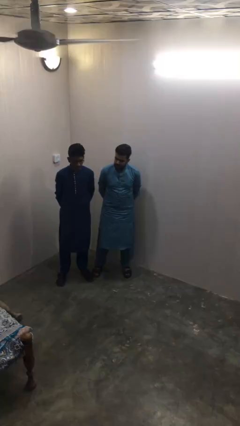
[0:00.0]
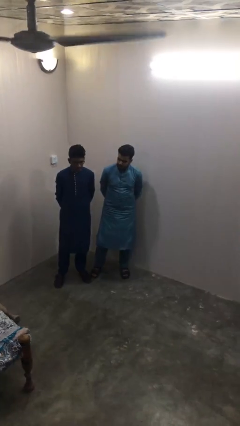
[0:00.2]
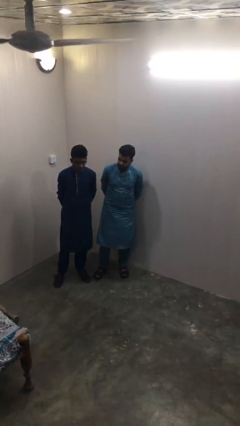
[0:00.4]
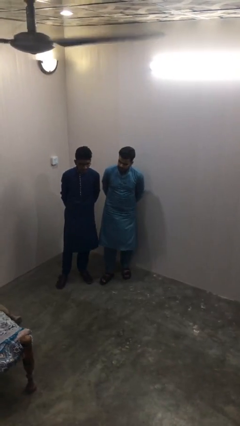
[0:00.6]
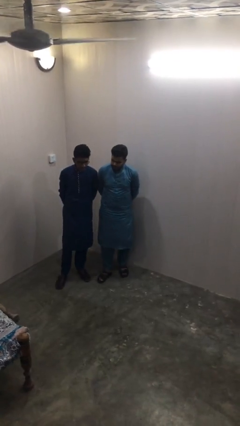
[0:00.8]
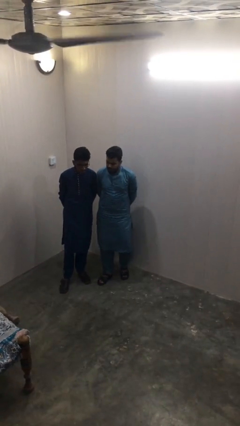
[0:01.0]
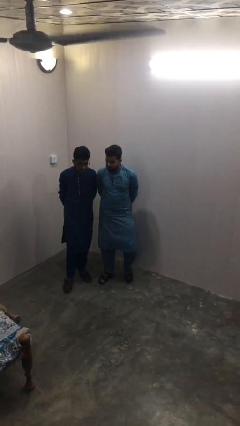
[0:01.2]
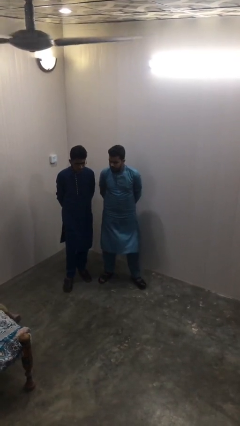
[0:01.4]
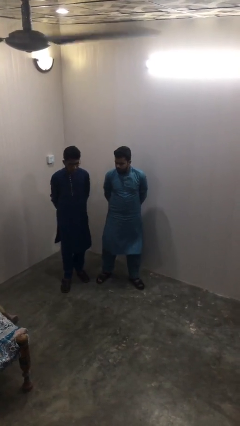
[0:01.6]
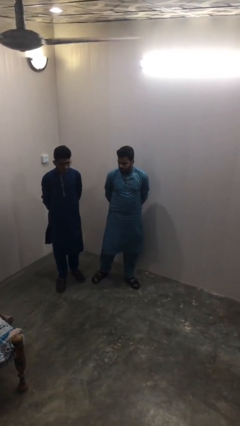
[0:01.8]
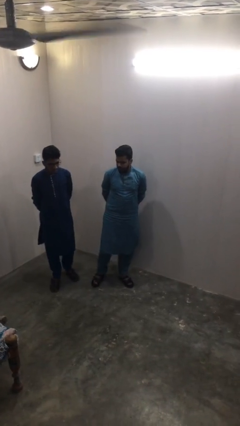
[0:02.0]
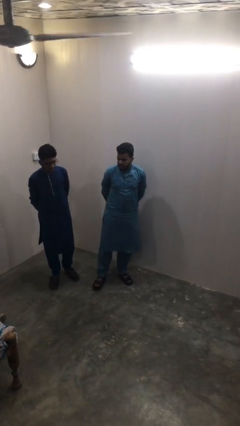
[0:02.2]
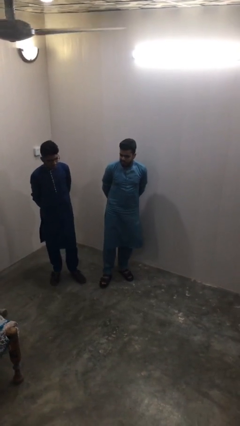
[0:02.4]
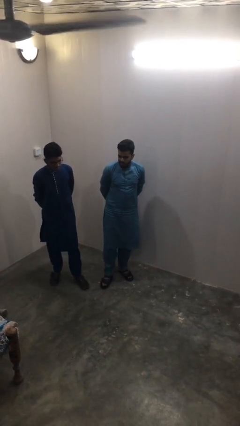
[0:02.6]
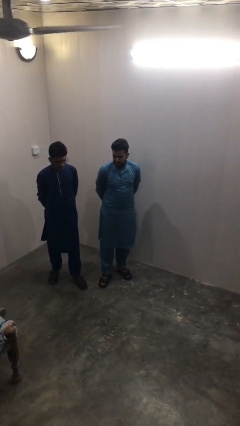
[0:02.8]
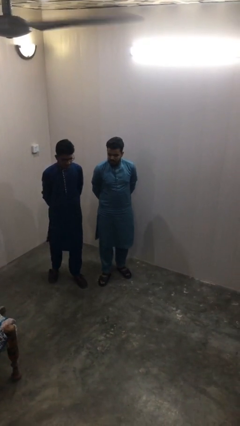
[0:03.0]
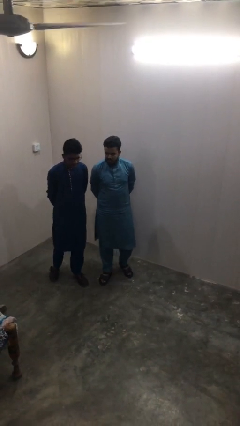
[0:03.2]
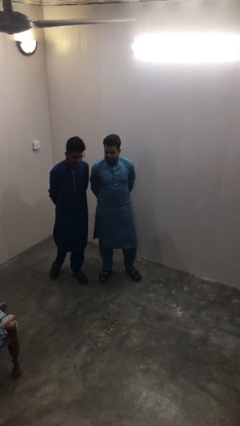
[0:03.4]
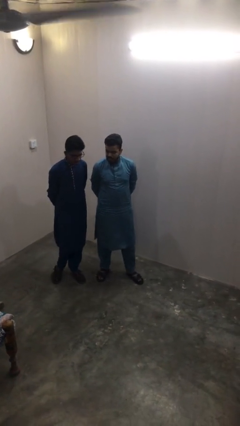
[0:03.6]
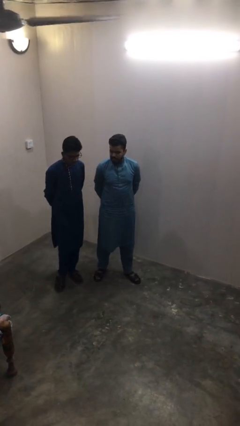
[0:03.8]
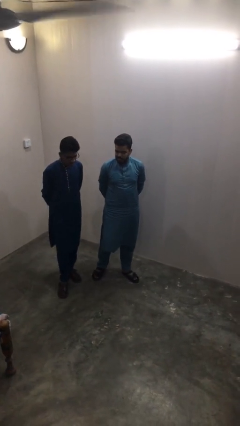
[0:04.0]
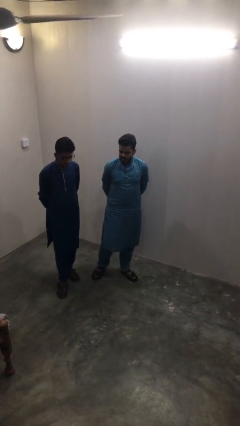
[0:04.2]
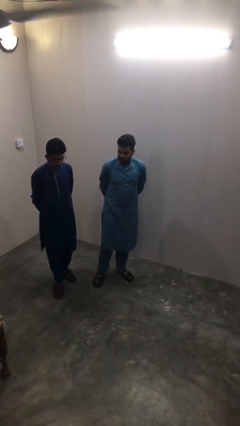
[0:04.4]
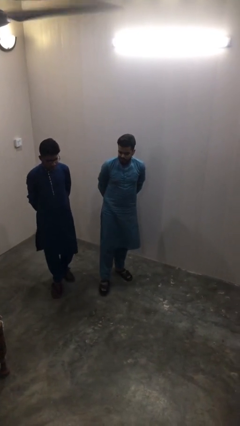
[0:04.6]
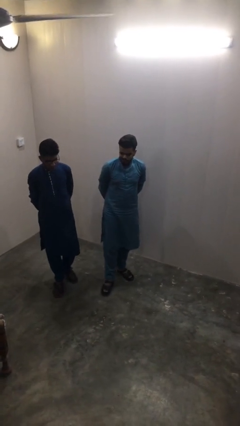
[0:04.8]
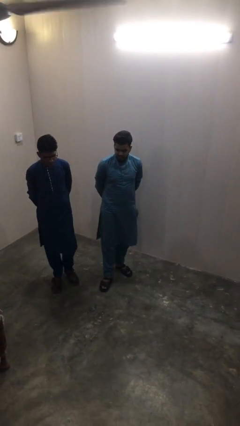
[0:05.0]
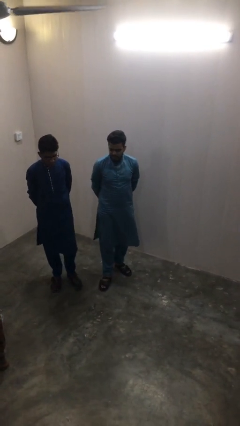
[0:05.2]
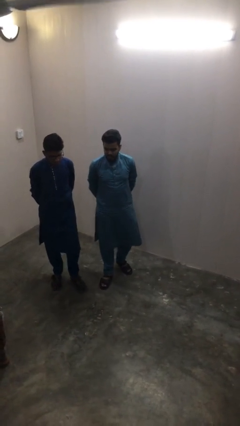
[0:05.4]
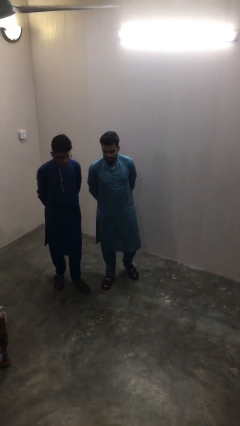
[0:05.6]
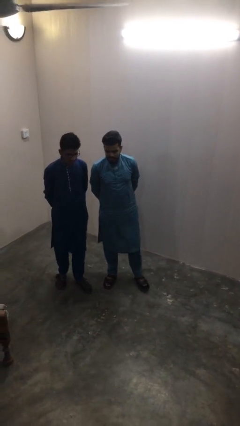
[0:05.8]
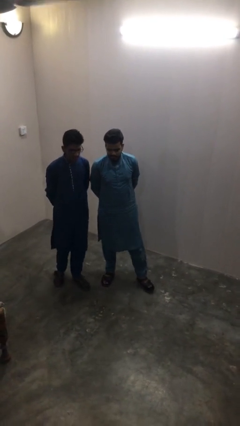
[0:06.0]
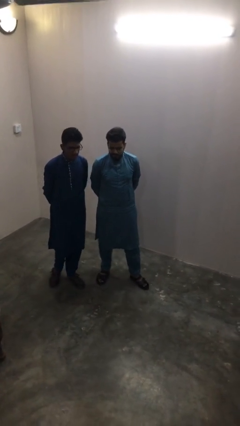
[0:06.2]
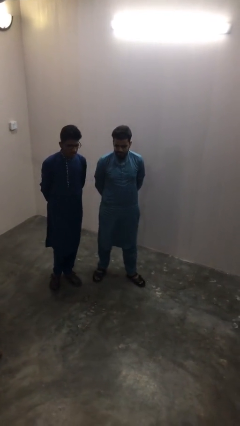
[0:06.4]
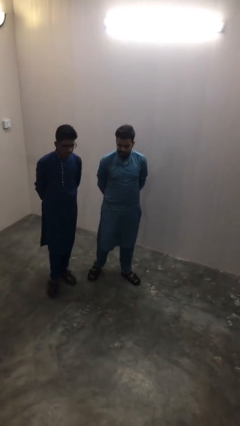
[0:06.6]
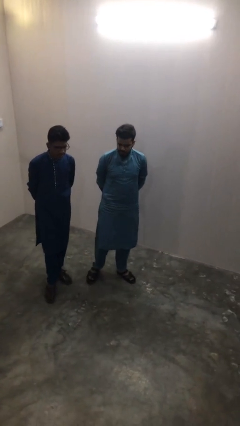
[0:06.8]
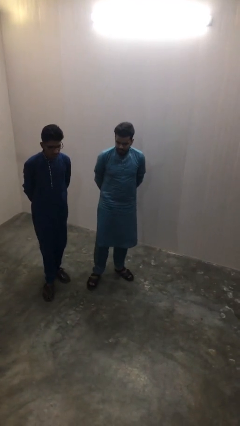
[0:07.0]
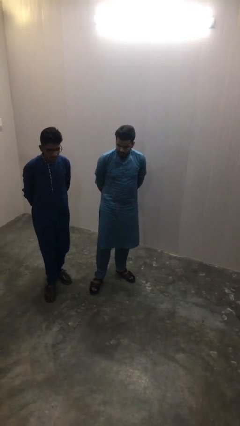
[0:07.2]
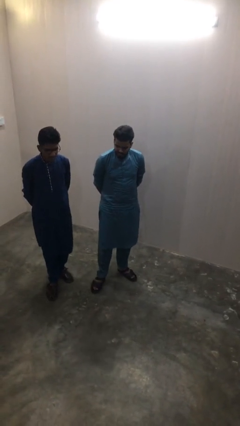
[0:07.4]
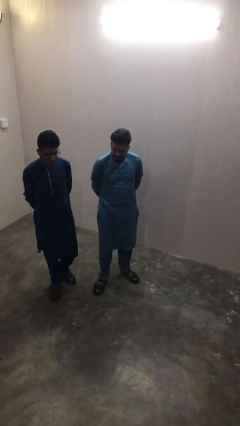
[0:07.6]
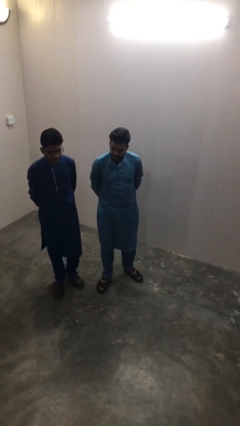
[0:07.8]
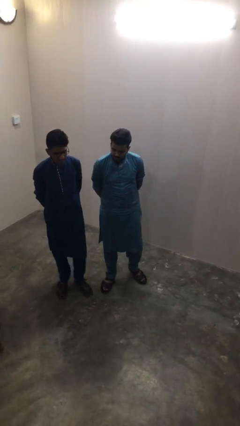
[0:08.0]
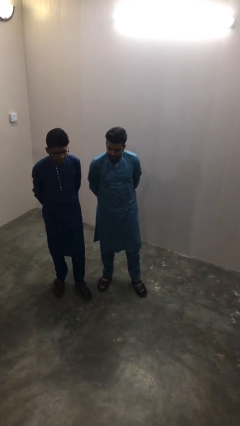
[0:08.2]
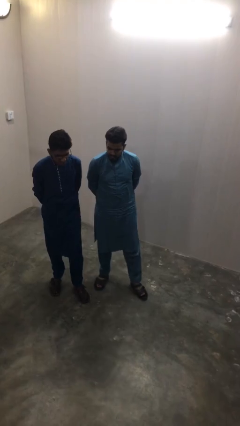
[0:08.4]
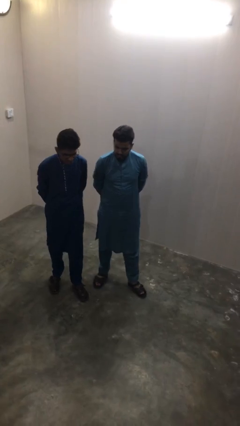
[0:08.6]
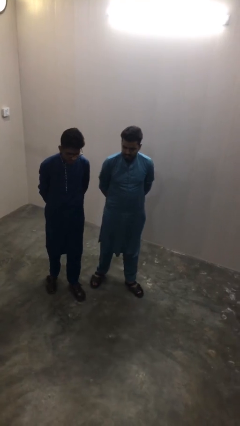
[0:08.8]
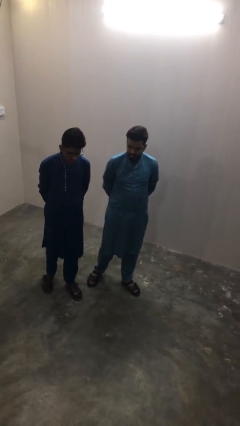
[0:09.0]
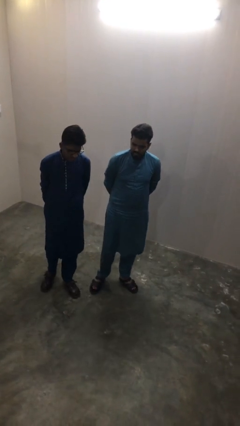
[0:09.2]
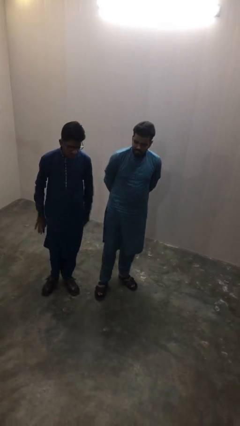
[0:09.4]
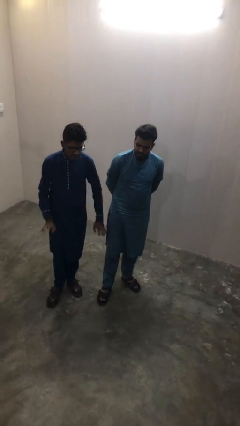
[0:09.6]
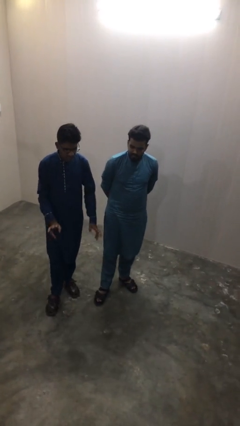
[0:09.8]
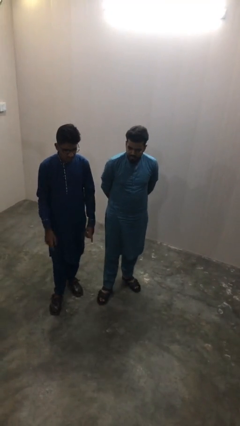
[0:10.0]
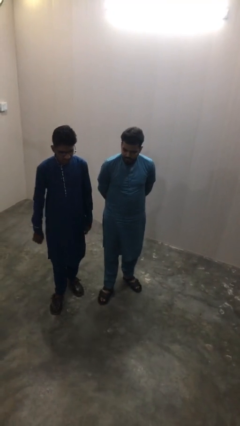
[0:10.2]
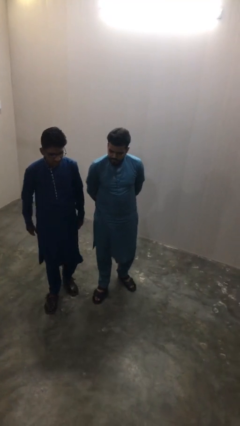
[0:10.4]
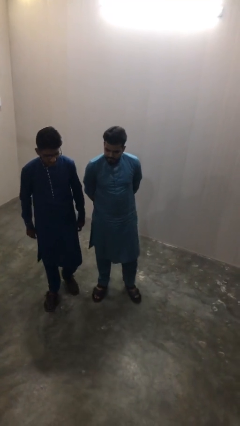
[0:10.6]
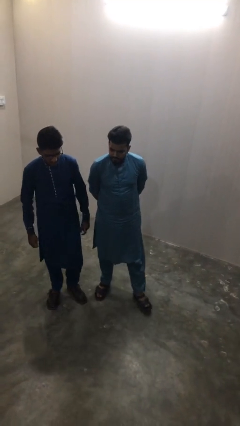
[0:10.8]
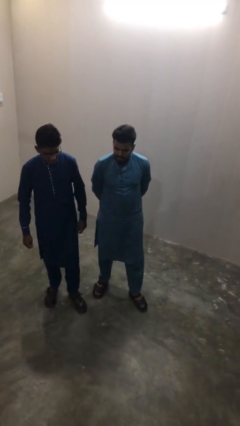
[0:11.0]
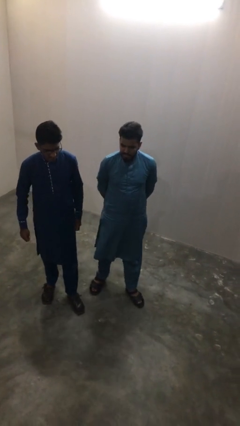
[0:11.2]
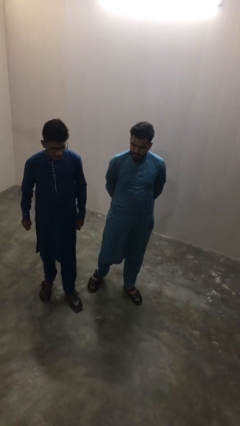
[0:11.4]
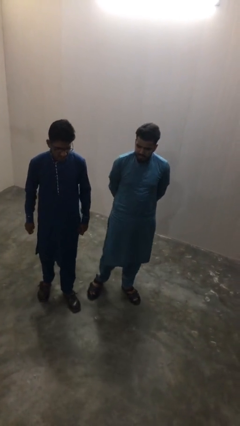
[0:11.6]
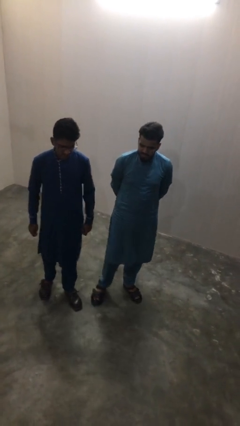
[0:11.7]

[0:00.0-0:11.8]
person talks to person

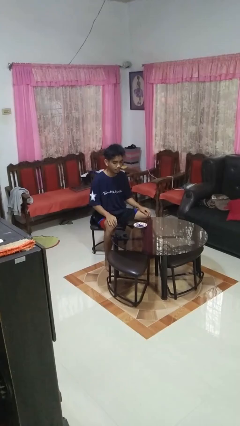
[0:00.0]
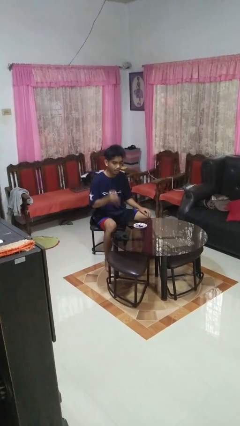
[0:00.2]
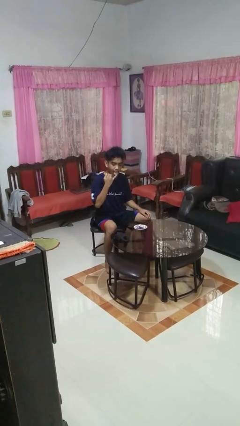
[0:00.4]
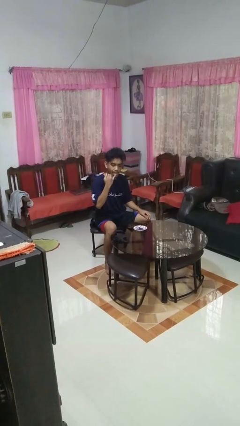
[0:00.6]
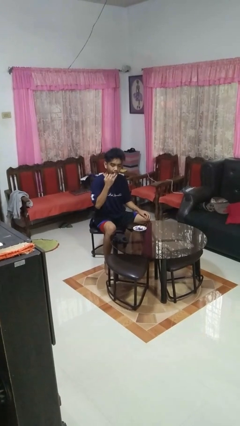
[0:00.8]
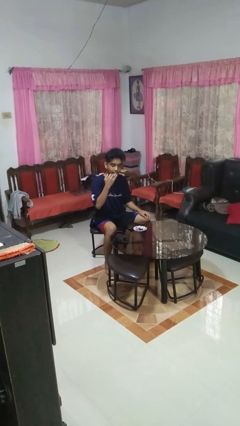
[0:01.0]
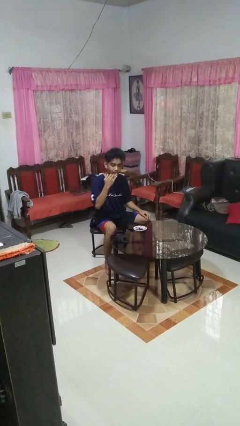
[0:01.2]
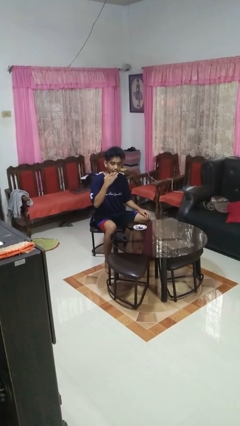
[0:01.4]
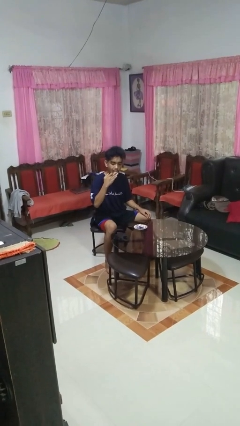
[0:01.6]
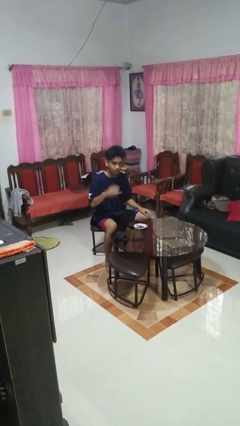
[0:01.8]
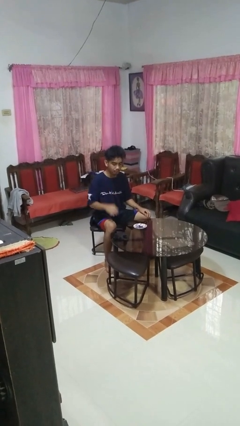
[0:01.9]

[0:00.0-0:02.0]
person licks fingers

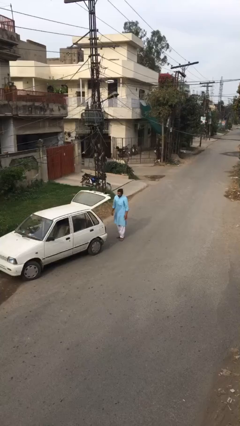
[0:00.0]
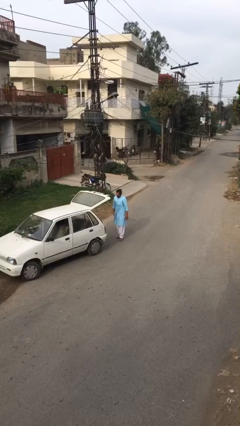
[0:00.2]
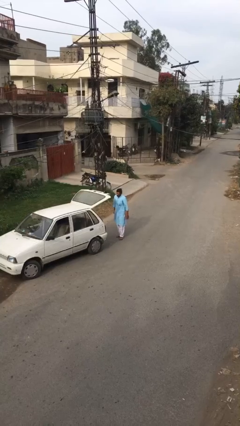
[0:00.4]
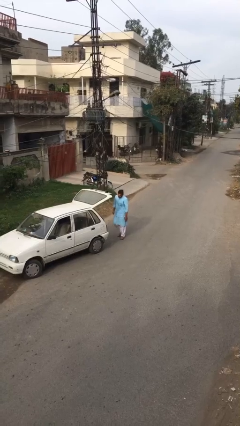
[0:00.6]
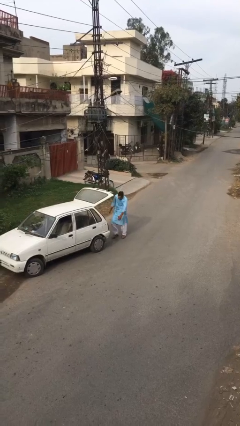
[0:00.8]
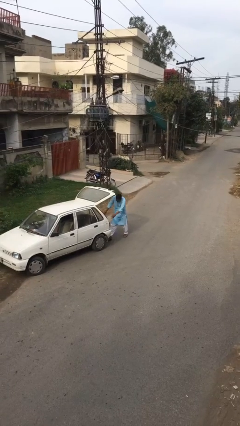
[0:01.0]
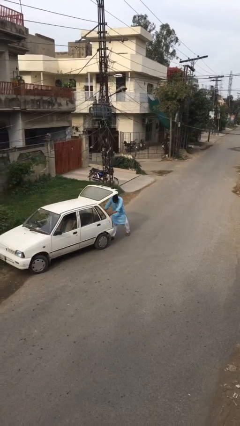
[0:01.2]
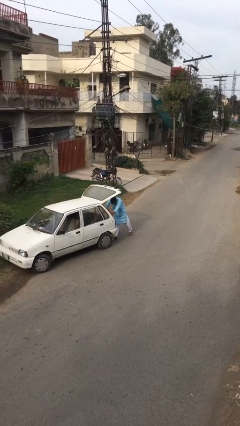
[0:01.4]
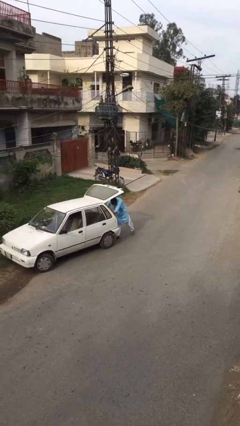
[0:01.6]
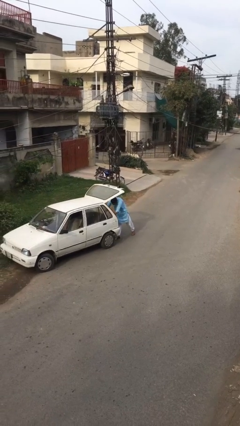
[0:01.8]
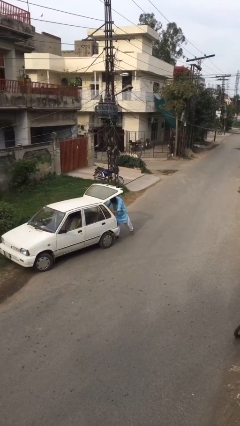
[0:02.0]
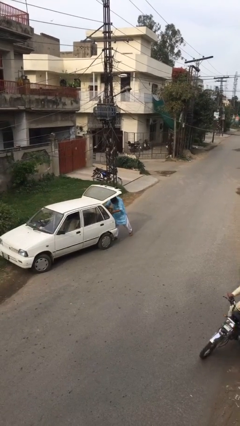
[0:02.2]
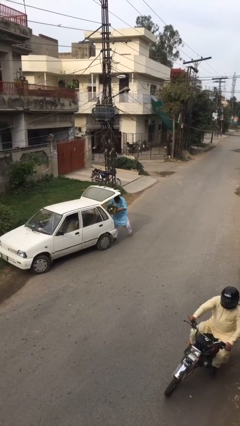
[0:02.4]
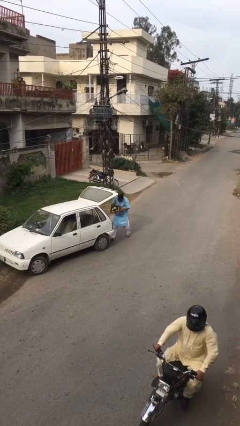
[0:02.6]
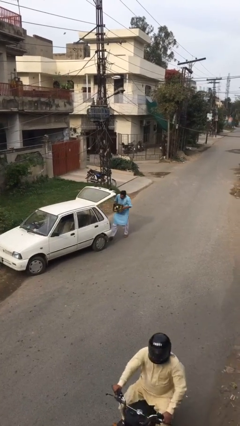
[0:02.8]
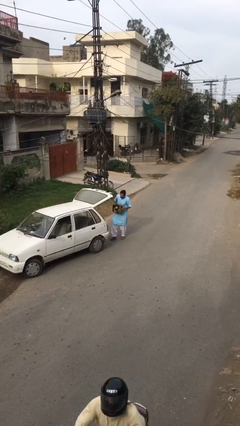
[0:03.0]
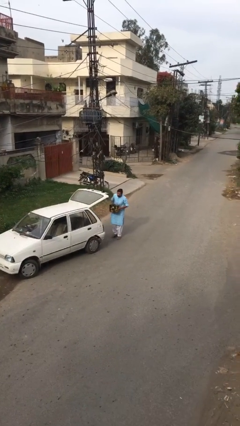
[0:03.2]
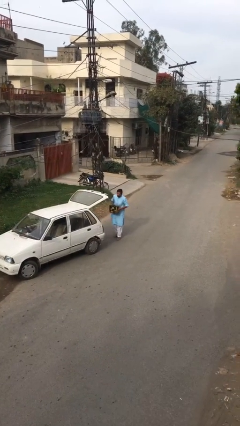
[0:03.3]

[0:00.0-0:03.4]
person unloads car

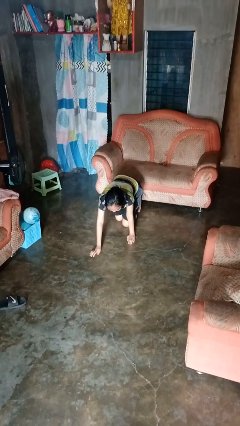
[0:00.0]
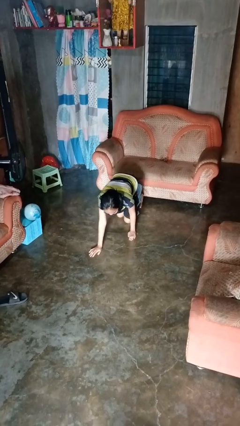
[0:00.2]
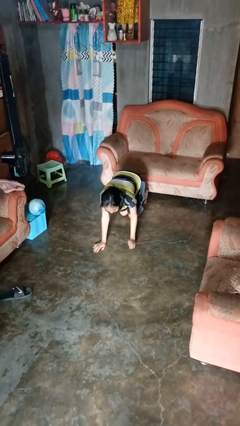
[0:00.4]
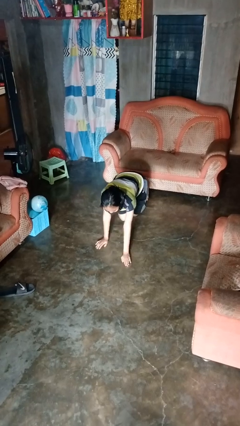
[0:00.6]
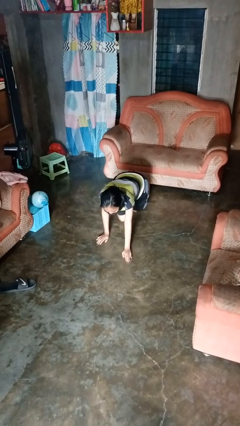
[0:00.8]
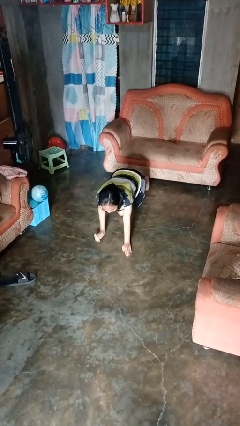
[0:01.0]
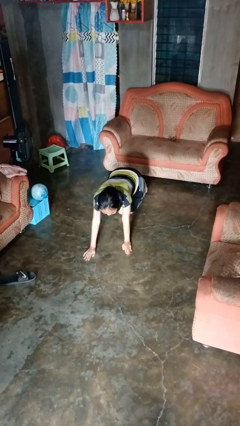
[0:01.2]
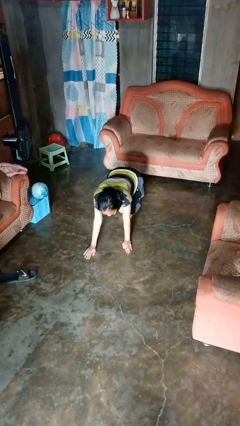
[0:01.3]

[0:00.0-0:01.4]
person crawls
